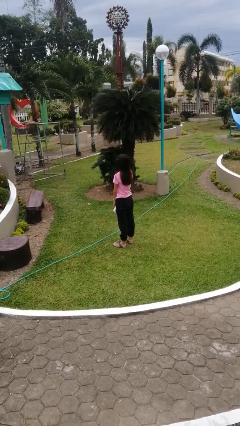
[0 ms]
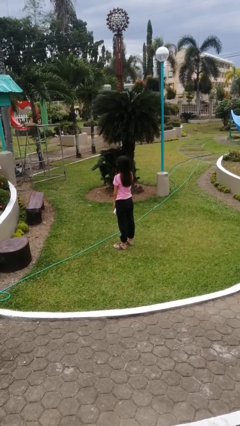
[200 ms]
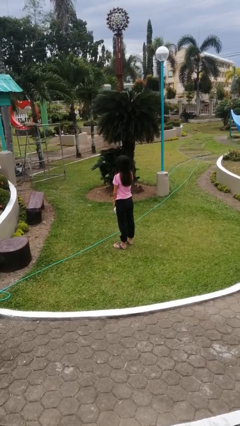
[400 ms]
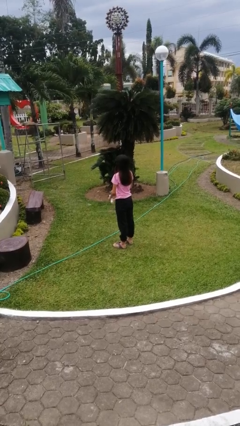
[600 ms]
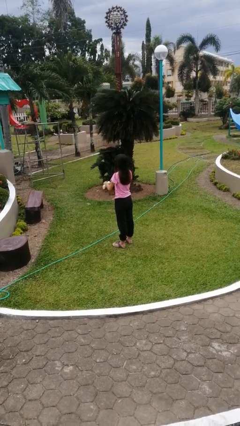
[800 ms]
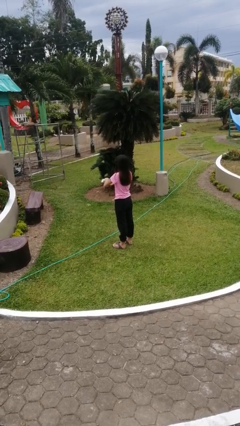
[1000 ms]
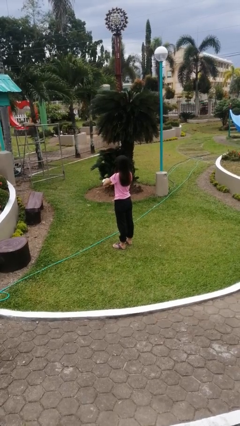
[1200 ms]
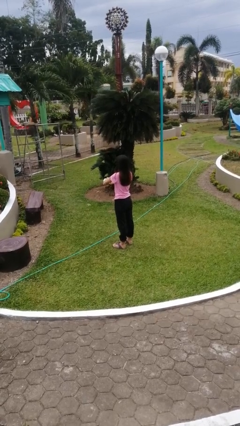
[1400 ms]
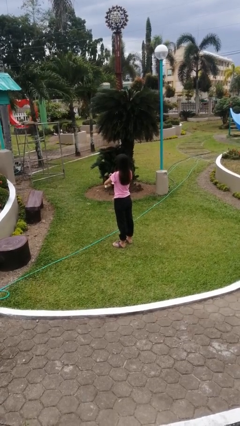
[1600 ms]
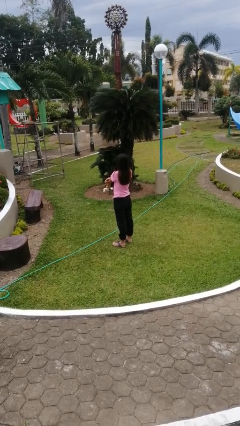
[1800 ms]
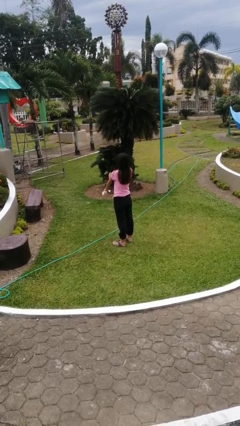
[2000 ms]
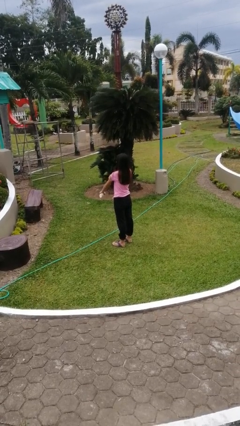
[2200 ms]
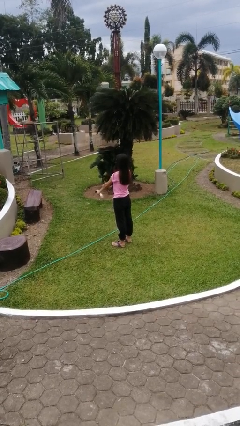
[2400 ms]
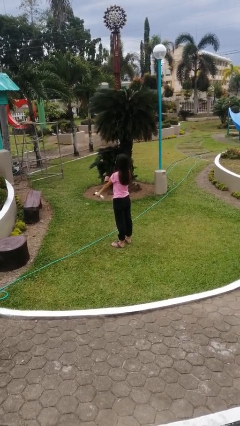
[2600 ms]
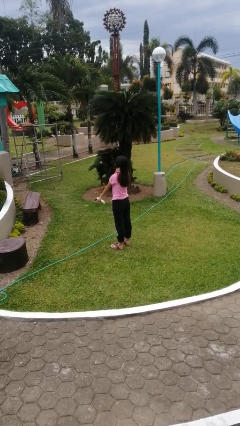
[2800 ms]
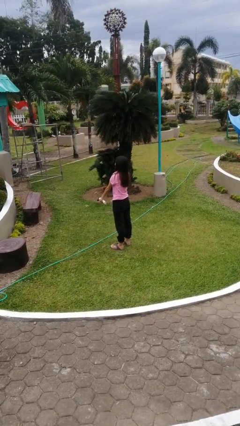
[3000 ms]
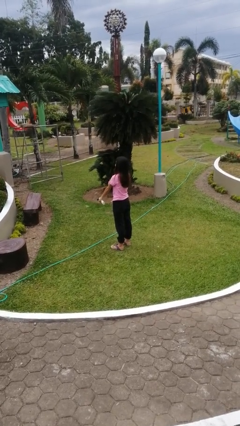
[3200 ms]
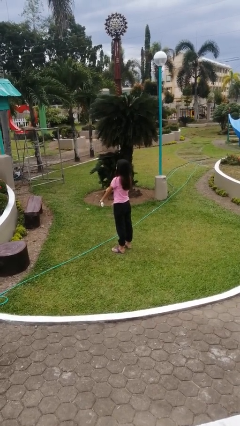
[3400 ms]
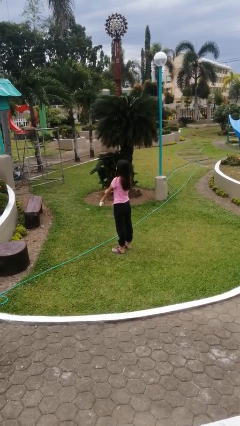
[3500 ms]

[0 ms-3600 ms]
person applies sunscreen

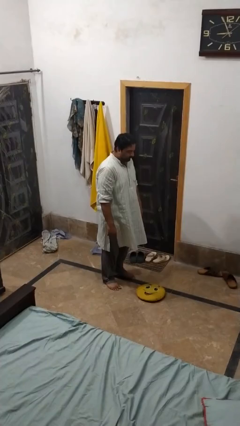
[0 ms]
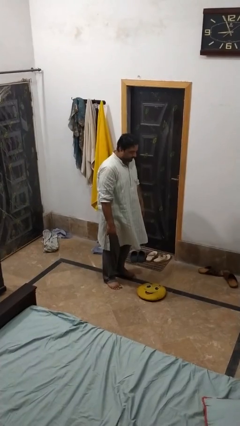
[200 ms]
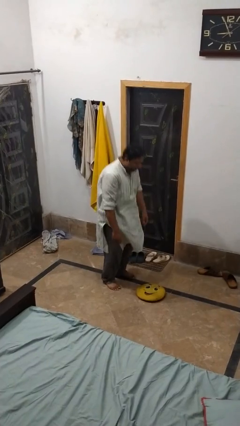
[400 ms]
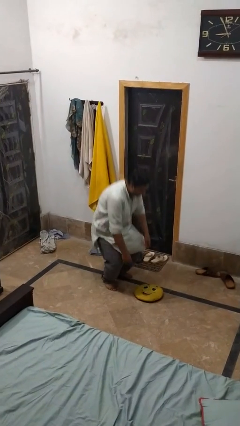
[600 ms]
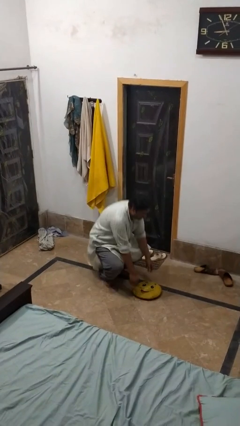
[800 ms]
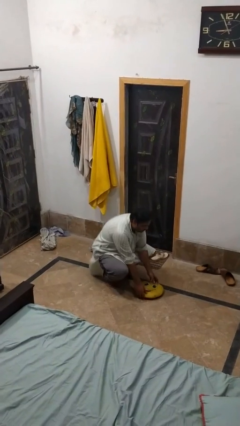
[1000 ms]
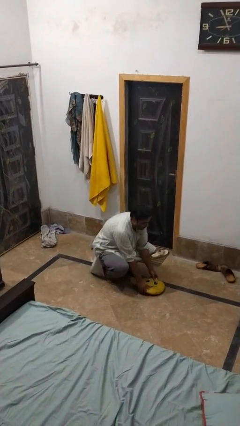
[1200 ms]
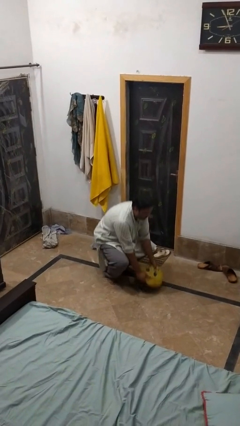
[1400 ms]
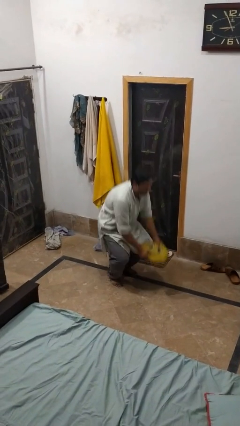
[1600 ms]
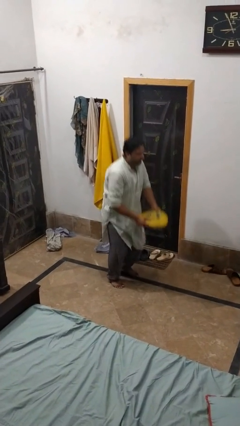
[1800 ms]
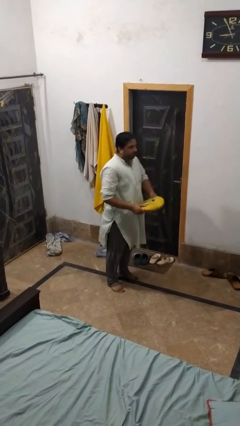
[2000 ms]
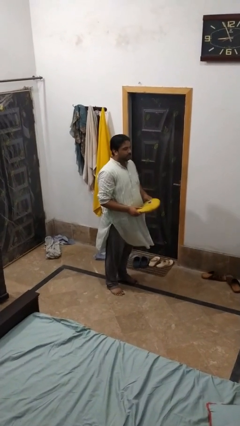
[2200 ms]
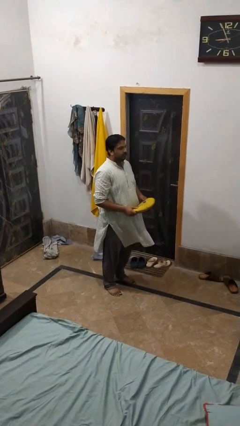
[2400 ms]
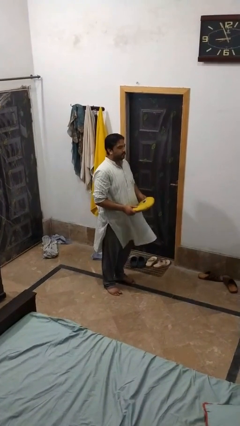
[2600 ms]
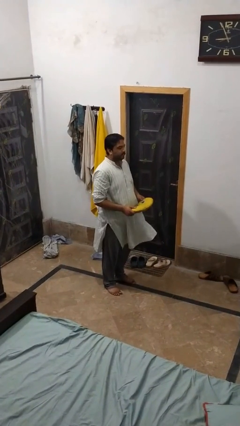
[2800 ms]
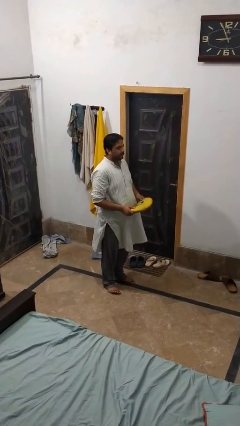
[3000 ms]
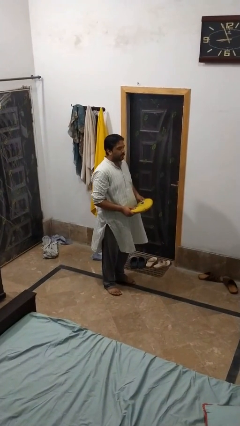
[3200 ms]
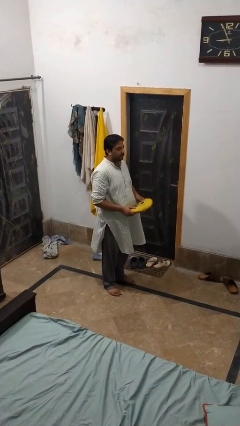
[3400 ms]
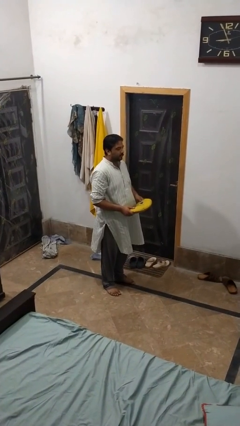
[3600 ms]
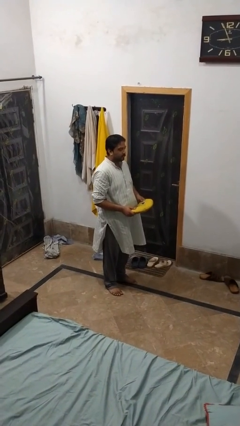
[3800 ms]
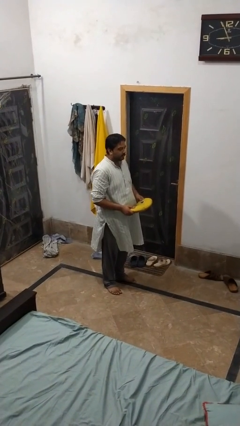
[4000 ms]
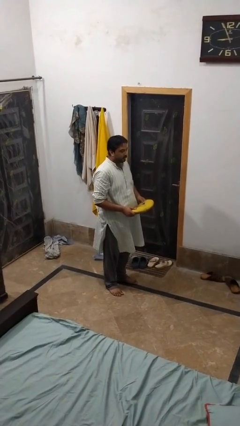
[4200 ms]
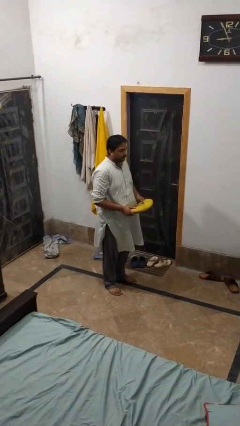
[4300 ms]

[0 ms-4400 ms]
person picks up object from floor

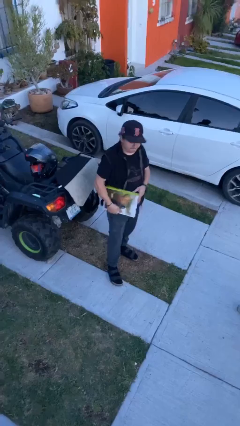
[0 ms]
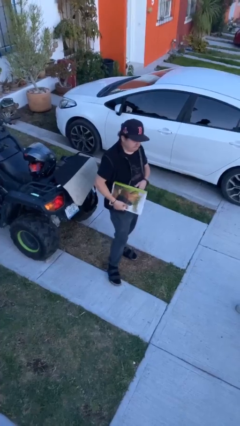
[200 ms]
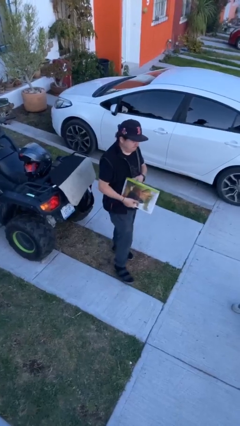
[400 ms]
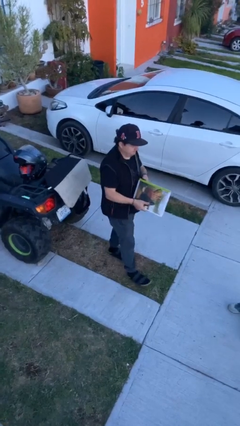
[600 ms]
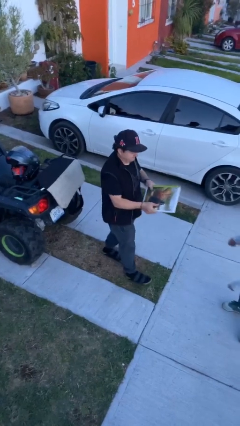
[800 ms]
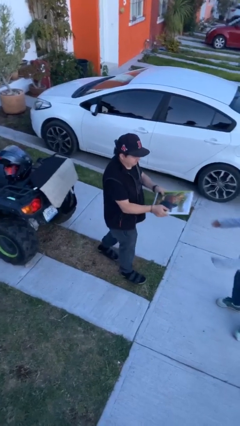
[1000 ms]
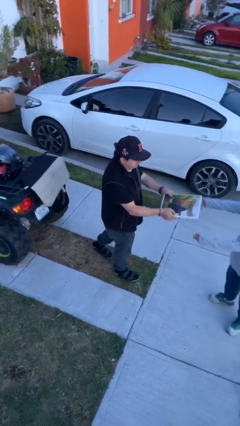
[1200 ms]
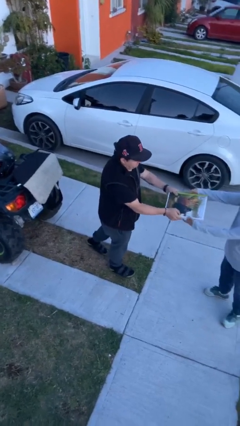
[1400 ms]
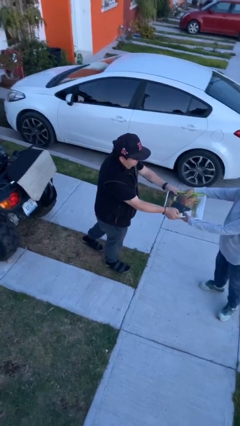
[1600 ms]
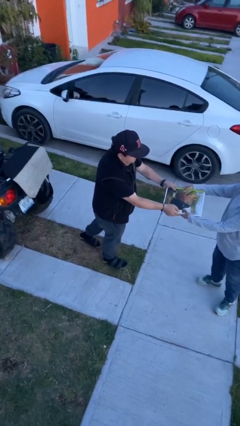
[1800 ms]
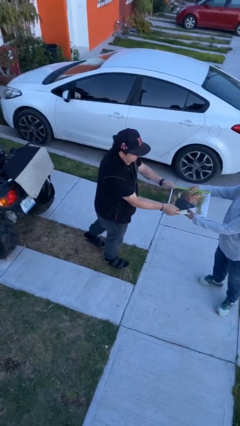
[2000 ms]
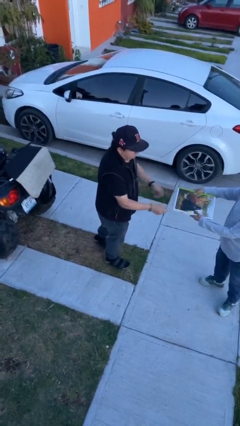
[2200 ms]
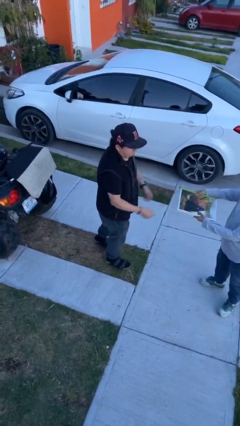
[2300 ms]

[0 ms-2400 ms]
person transfers object to person

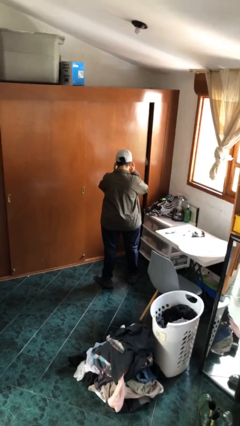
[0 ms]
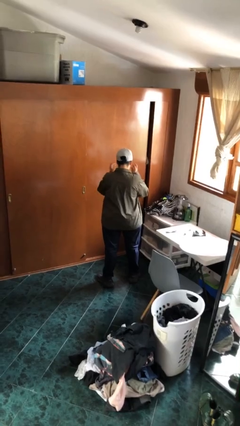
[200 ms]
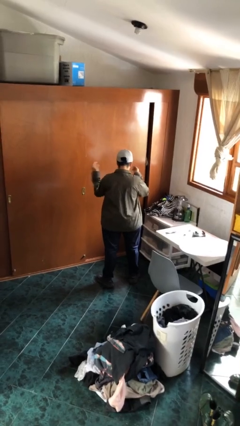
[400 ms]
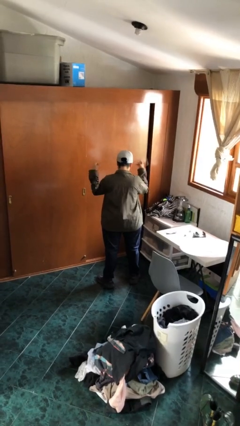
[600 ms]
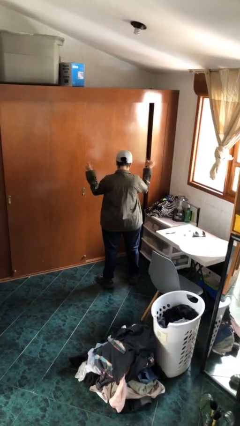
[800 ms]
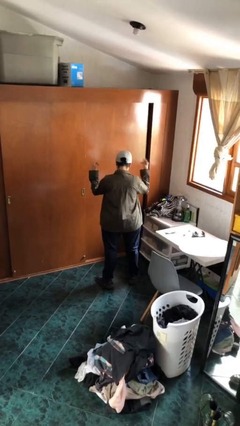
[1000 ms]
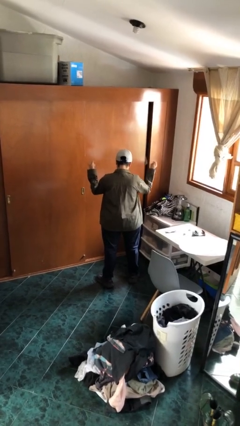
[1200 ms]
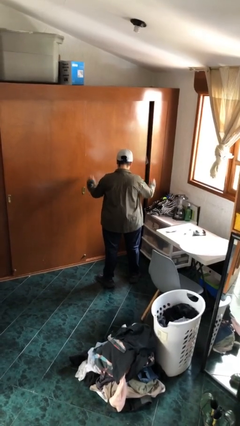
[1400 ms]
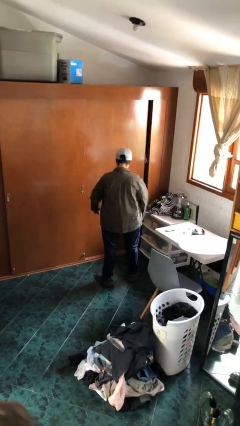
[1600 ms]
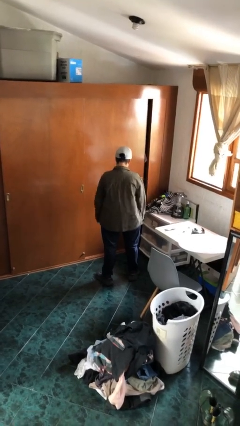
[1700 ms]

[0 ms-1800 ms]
person snaps fingers

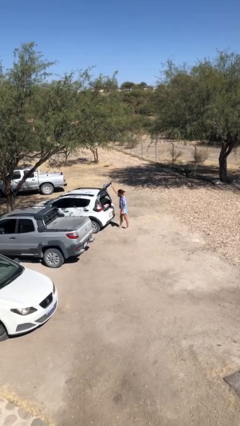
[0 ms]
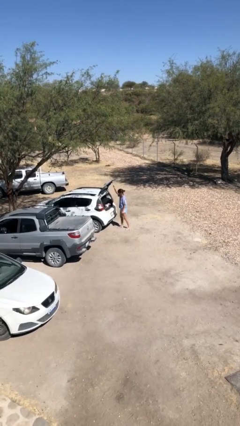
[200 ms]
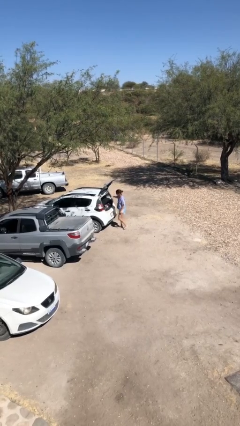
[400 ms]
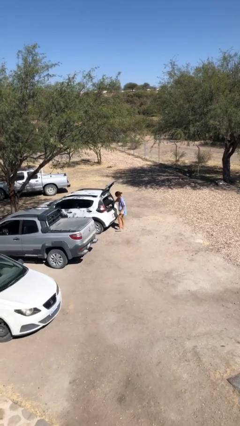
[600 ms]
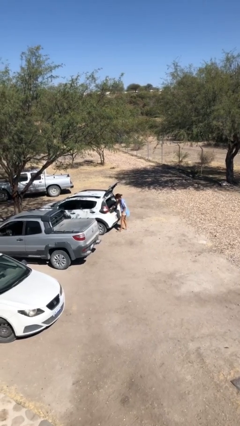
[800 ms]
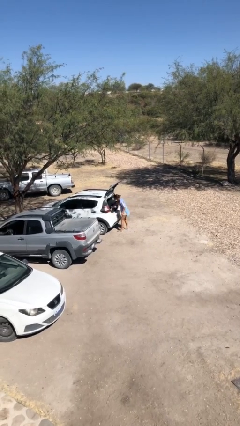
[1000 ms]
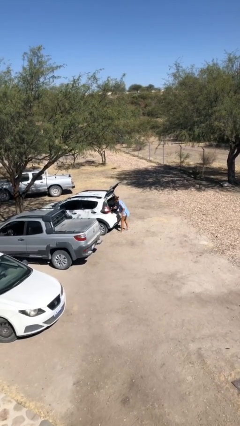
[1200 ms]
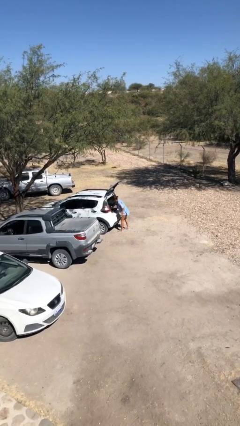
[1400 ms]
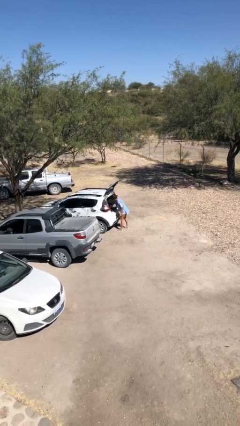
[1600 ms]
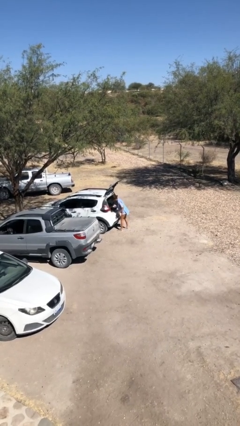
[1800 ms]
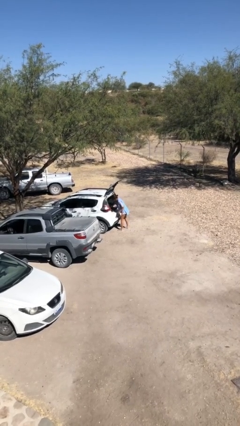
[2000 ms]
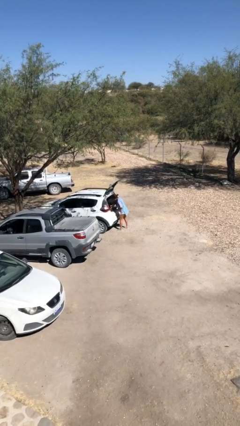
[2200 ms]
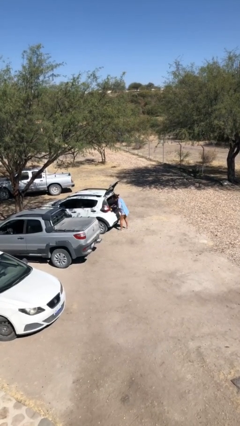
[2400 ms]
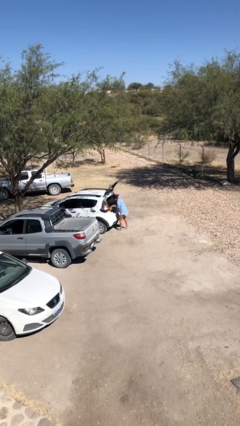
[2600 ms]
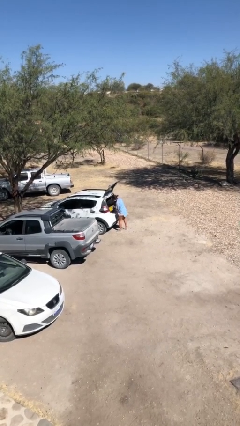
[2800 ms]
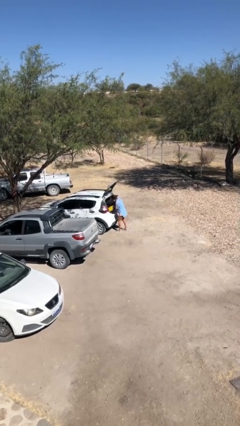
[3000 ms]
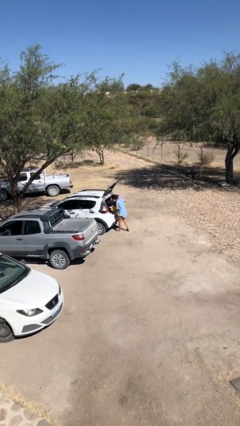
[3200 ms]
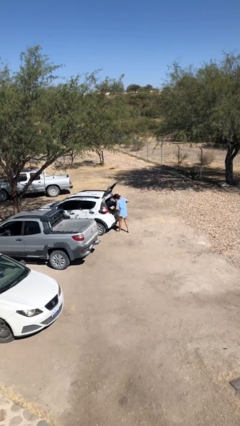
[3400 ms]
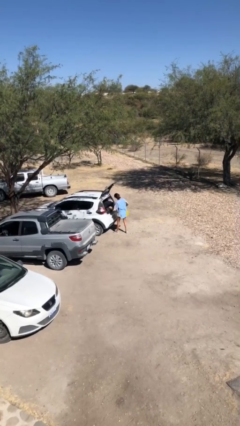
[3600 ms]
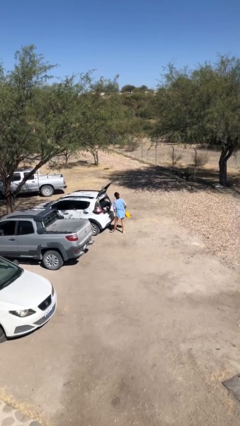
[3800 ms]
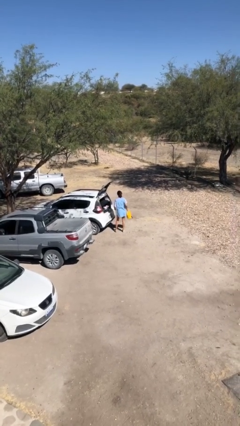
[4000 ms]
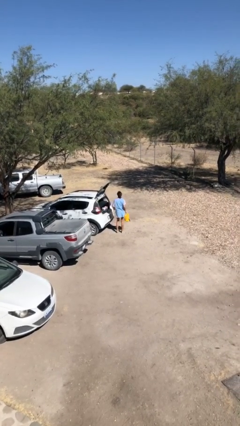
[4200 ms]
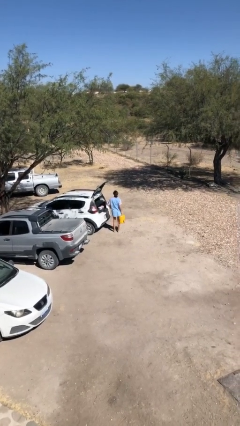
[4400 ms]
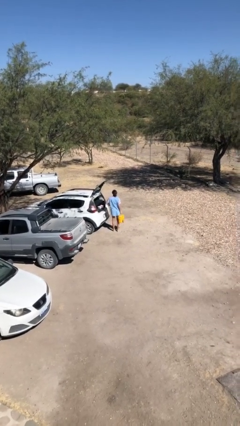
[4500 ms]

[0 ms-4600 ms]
person unloads car

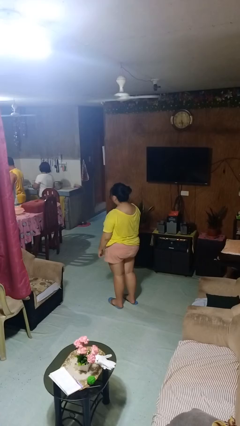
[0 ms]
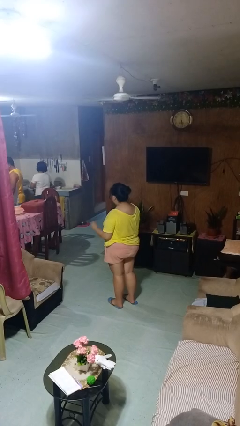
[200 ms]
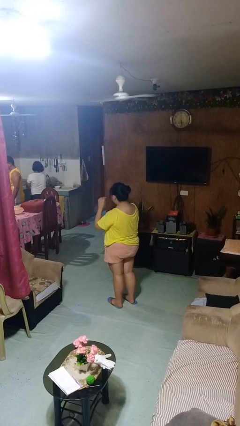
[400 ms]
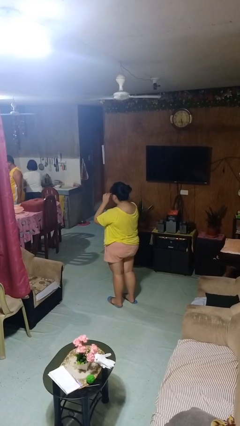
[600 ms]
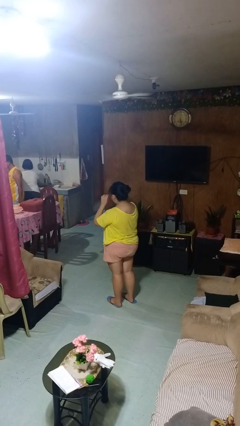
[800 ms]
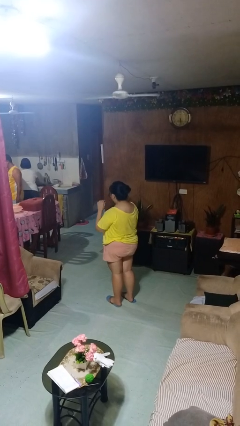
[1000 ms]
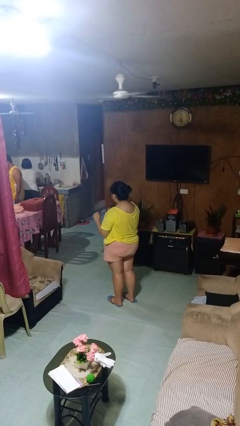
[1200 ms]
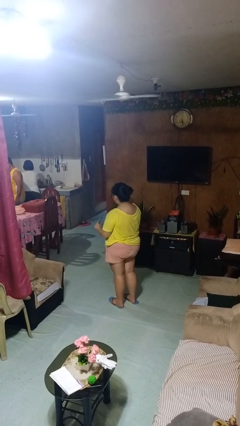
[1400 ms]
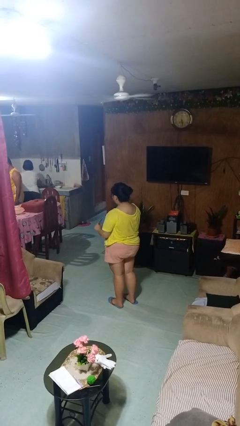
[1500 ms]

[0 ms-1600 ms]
person takes off glasses
